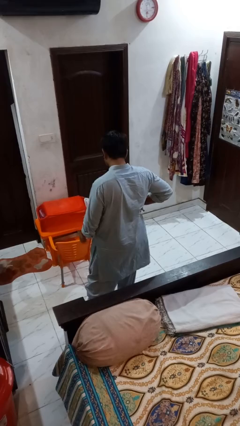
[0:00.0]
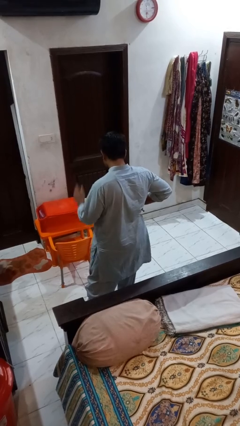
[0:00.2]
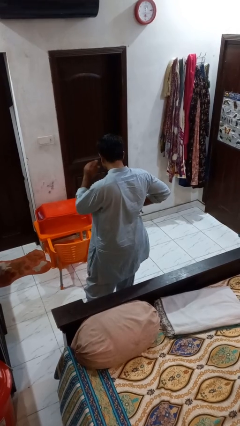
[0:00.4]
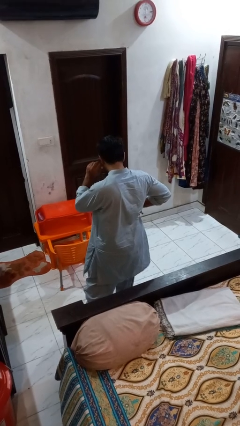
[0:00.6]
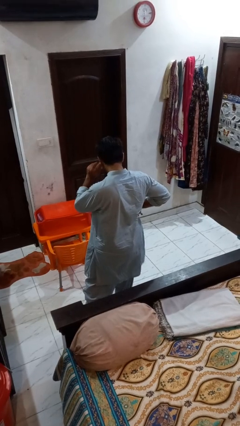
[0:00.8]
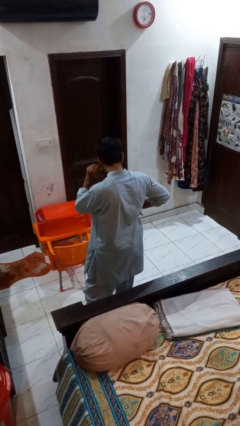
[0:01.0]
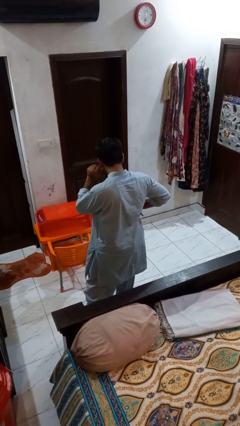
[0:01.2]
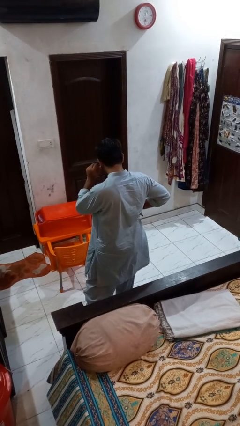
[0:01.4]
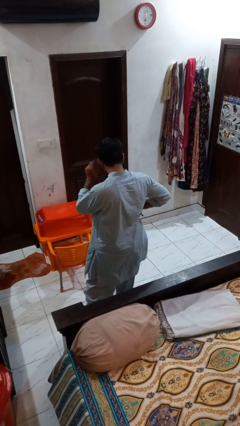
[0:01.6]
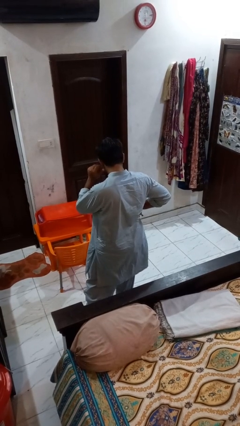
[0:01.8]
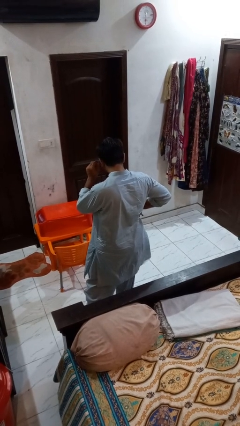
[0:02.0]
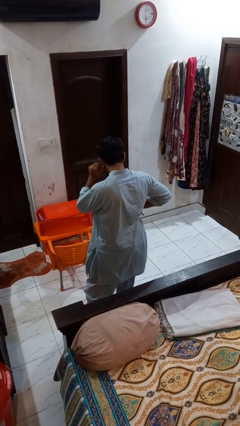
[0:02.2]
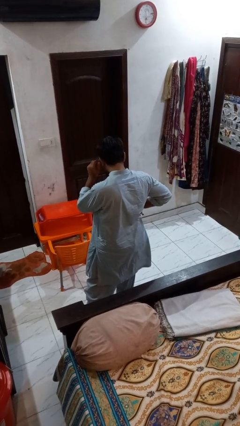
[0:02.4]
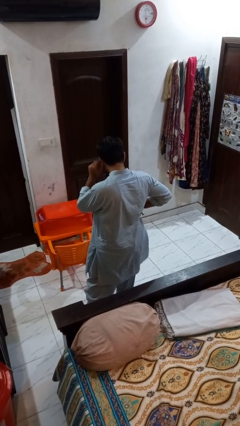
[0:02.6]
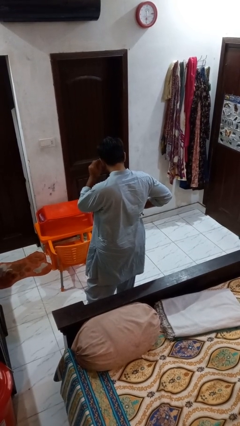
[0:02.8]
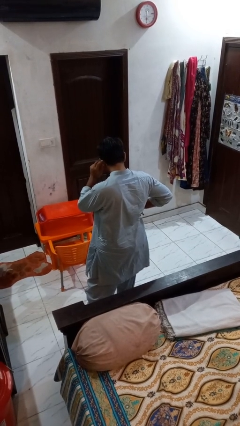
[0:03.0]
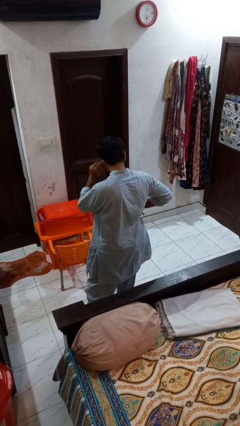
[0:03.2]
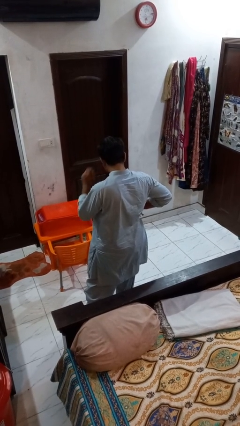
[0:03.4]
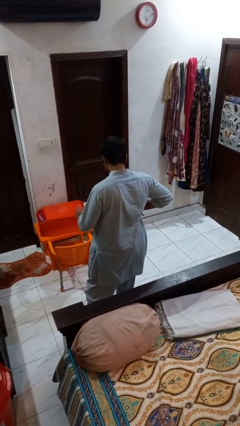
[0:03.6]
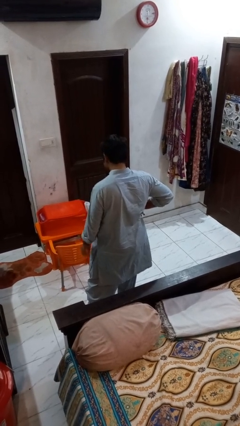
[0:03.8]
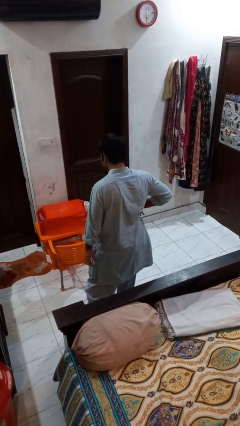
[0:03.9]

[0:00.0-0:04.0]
person touches earlobe

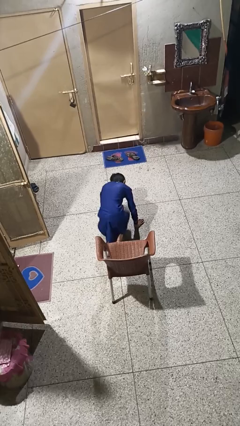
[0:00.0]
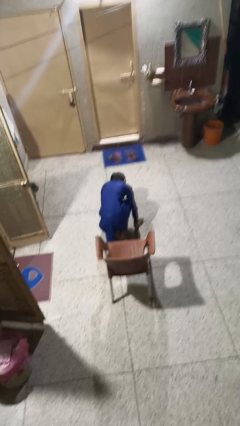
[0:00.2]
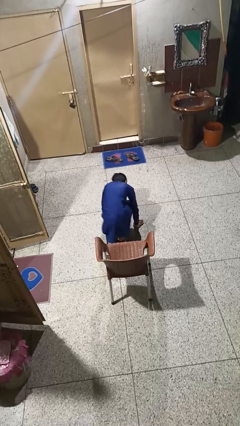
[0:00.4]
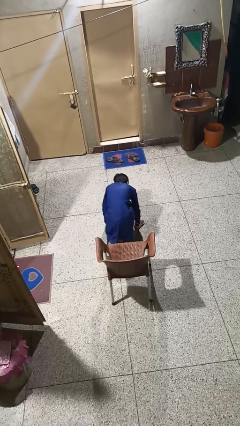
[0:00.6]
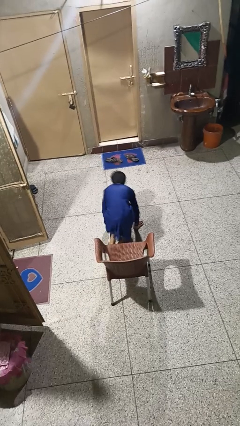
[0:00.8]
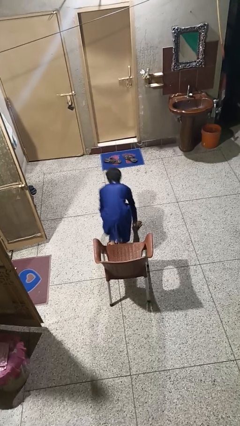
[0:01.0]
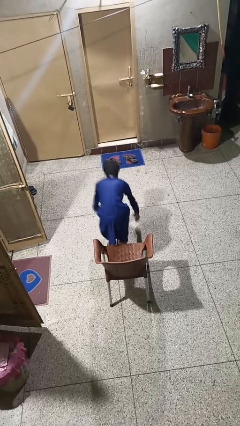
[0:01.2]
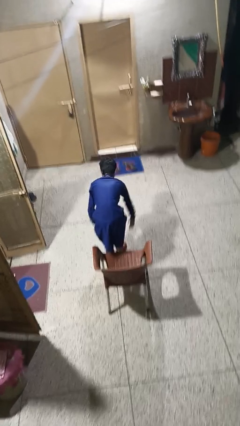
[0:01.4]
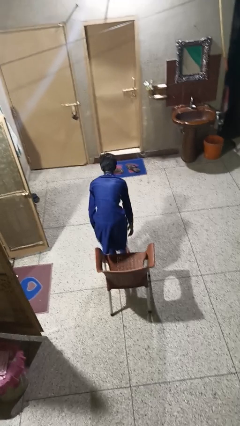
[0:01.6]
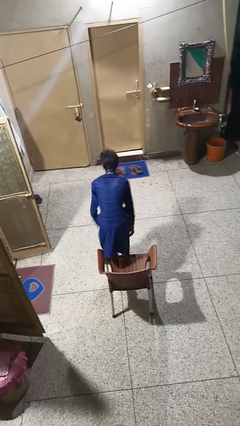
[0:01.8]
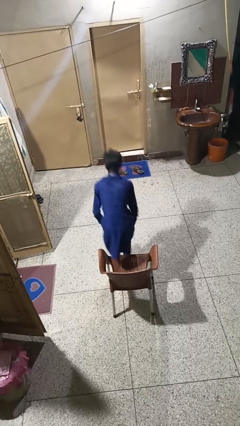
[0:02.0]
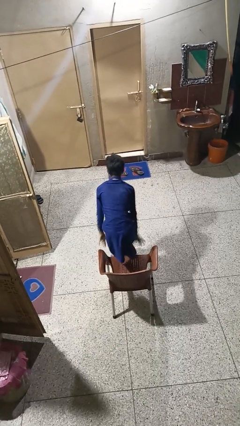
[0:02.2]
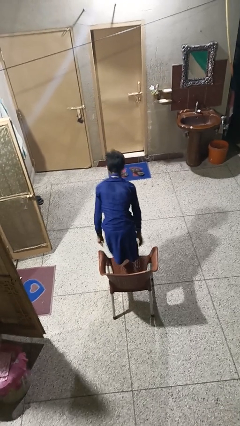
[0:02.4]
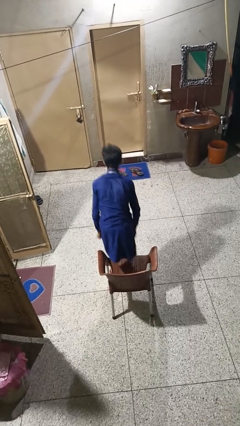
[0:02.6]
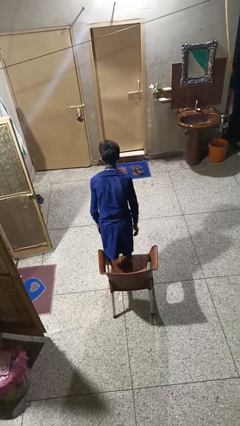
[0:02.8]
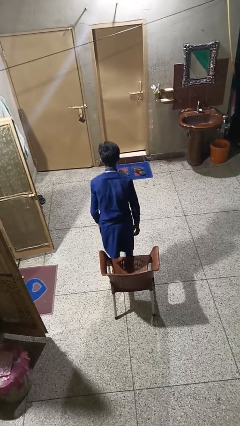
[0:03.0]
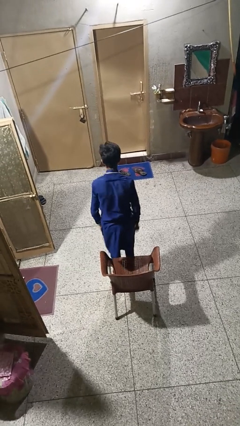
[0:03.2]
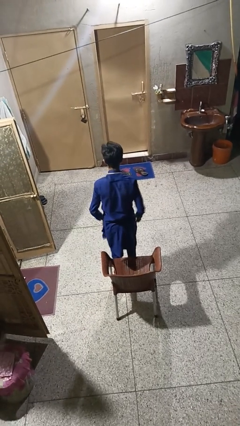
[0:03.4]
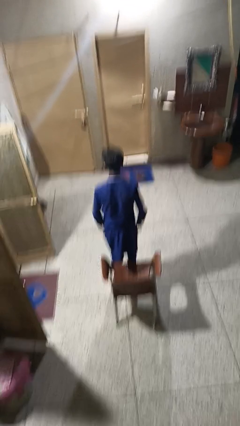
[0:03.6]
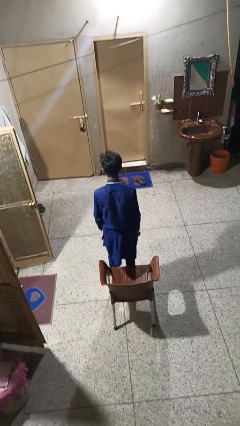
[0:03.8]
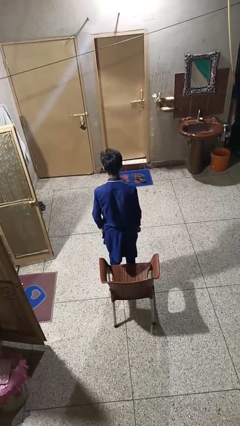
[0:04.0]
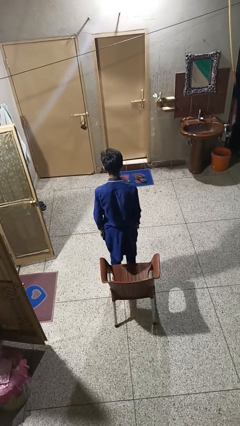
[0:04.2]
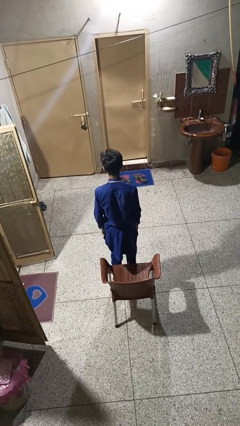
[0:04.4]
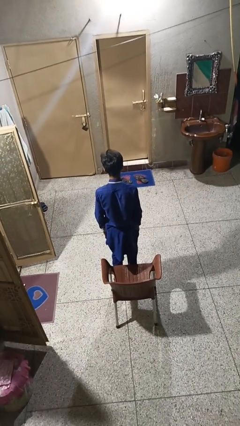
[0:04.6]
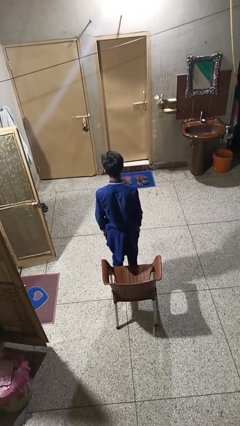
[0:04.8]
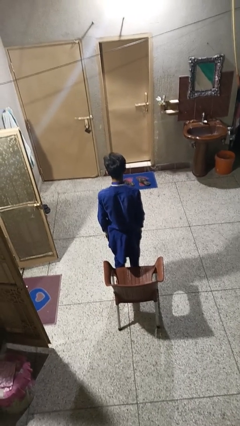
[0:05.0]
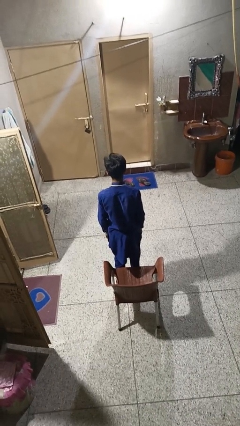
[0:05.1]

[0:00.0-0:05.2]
person stands up from floor

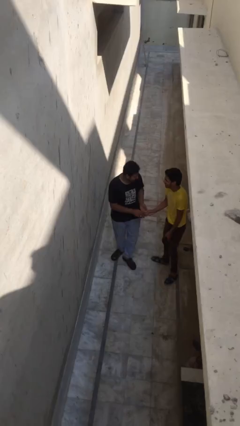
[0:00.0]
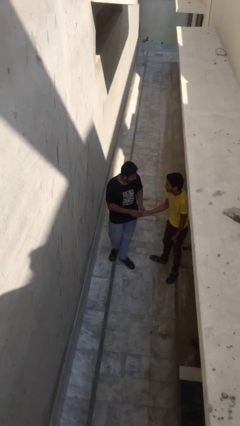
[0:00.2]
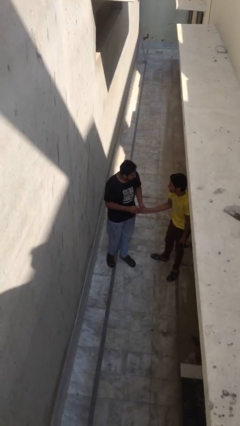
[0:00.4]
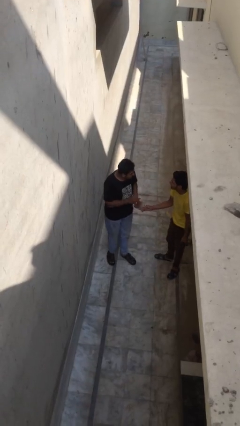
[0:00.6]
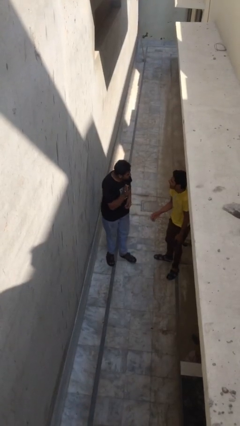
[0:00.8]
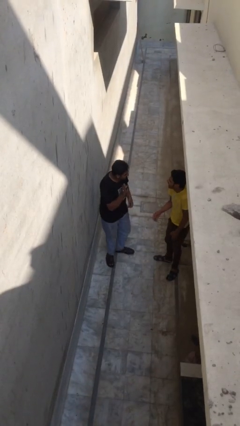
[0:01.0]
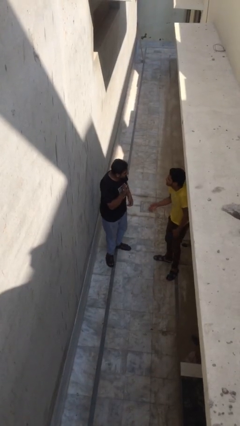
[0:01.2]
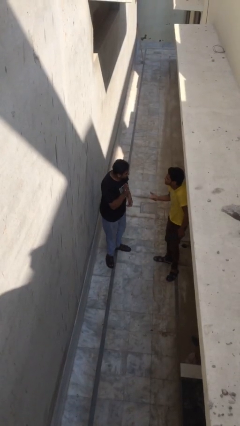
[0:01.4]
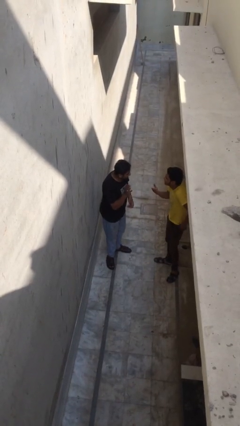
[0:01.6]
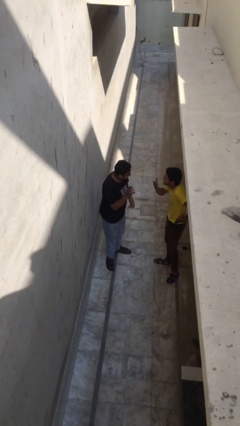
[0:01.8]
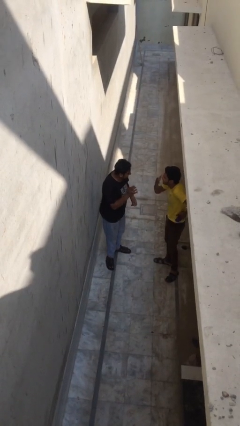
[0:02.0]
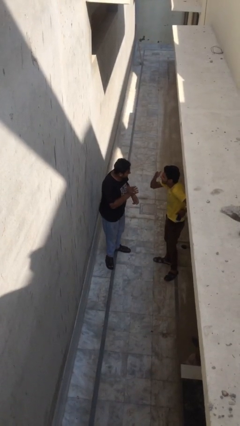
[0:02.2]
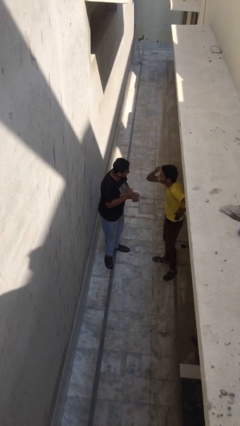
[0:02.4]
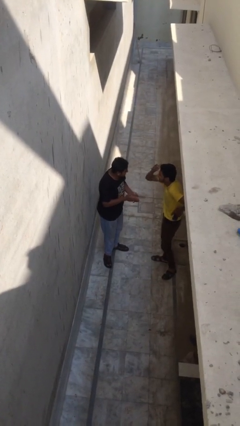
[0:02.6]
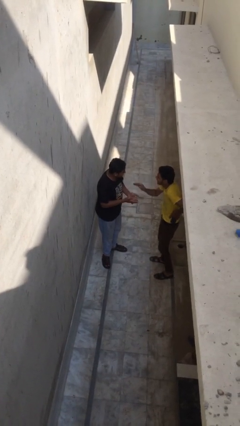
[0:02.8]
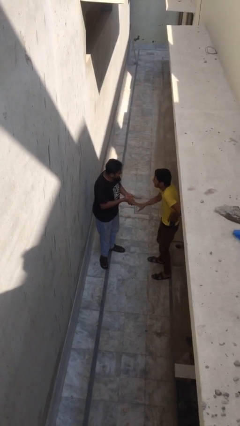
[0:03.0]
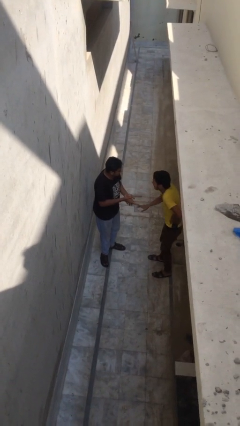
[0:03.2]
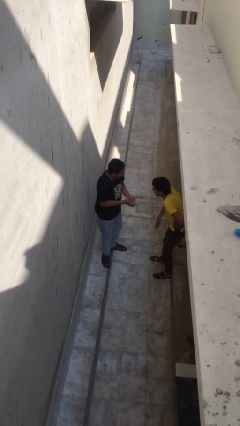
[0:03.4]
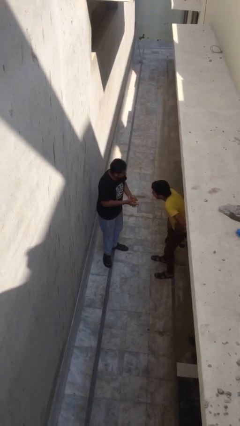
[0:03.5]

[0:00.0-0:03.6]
person talks to person

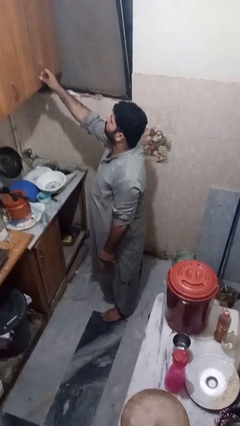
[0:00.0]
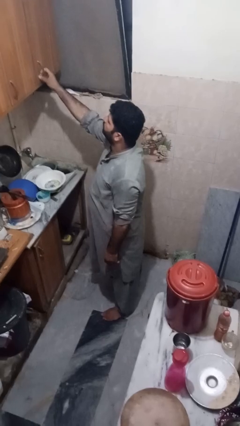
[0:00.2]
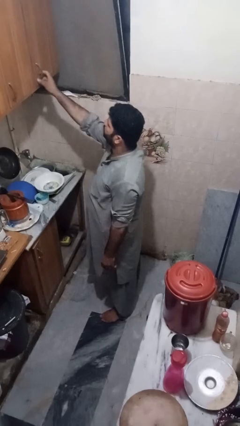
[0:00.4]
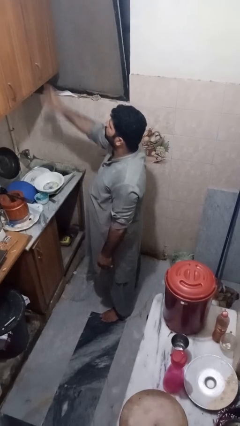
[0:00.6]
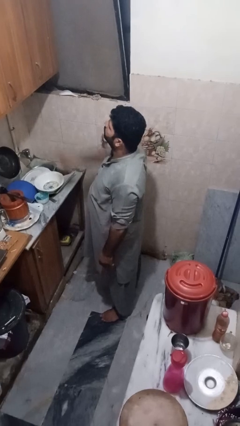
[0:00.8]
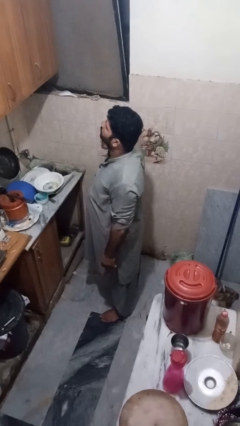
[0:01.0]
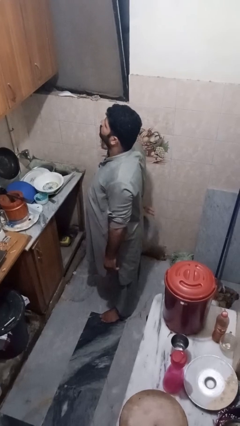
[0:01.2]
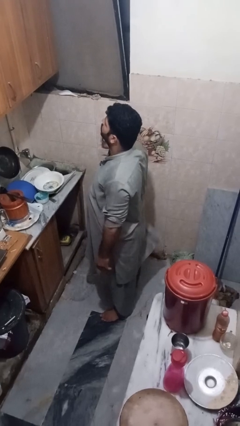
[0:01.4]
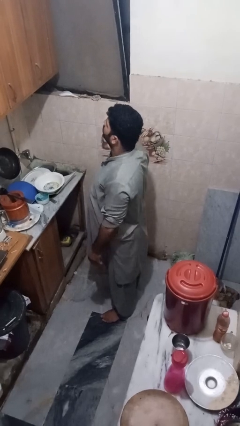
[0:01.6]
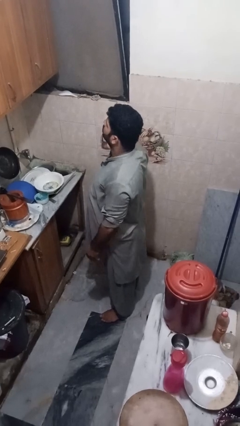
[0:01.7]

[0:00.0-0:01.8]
person closes cabinet

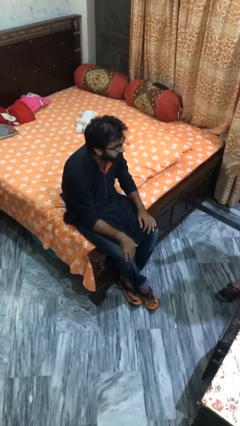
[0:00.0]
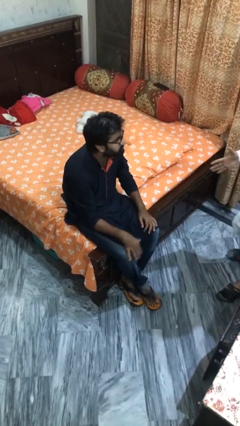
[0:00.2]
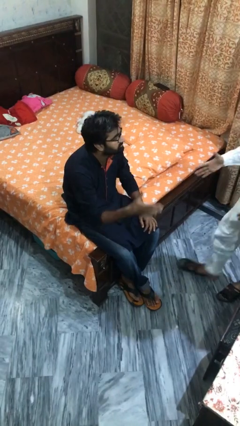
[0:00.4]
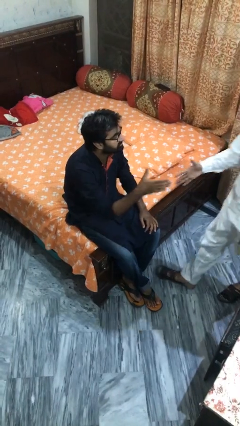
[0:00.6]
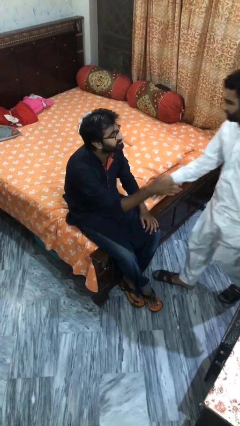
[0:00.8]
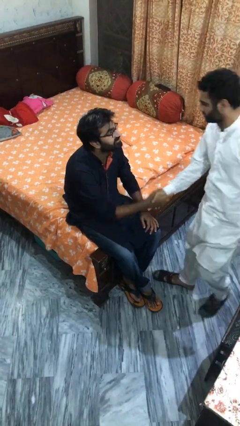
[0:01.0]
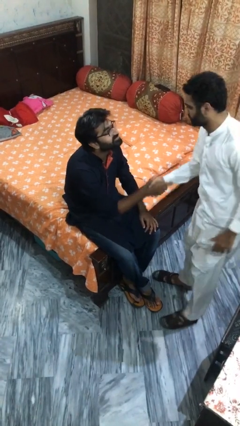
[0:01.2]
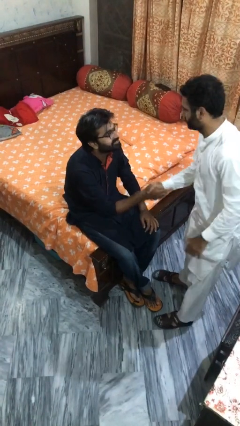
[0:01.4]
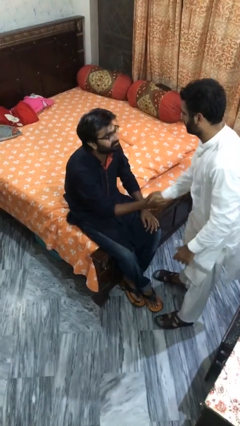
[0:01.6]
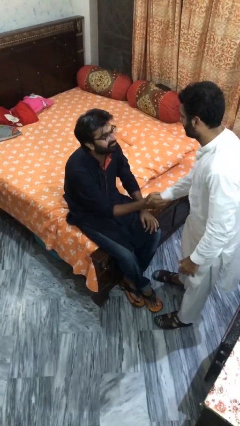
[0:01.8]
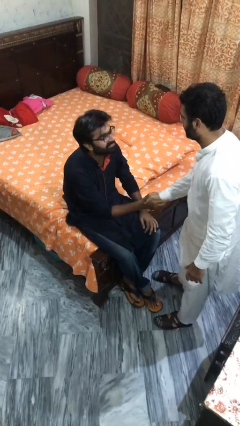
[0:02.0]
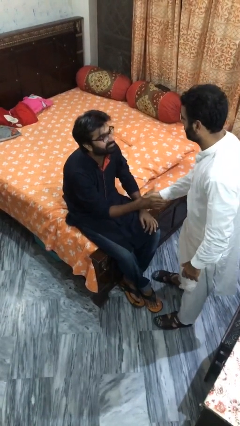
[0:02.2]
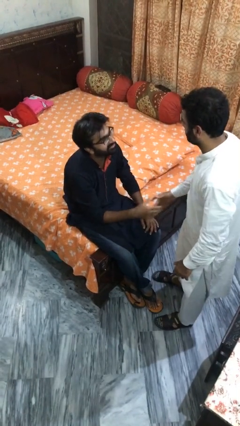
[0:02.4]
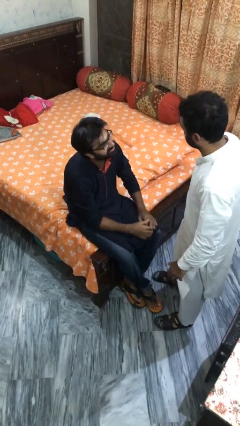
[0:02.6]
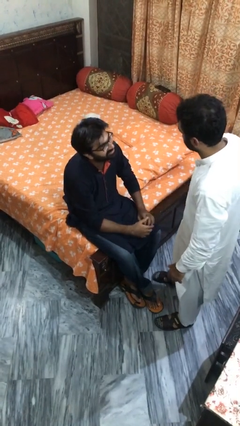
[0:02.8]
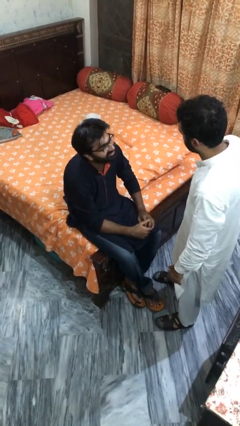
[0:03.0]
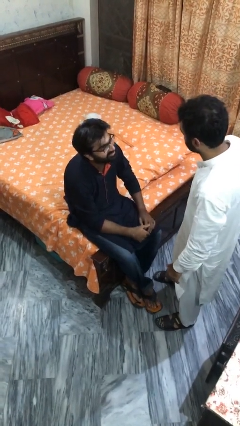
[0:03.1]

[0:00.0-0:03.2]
person shakes hand
